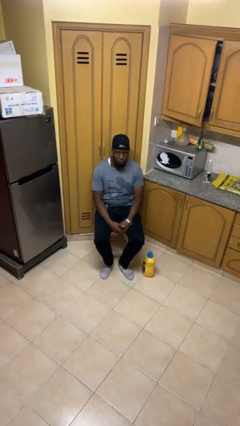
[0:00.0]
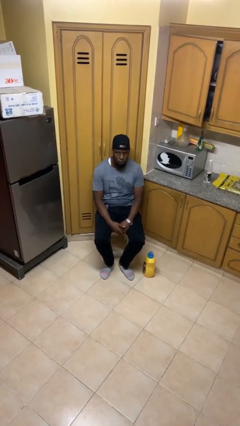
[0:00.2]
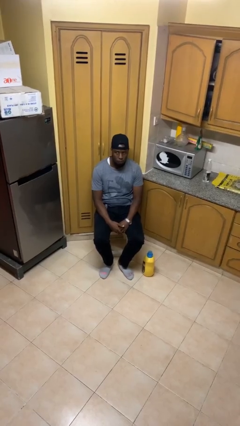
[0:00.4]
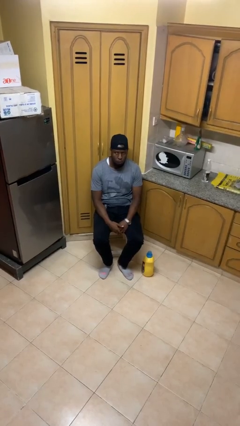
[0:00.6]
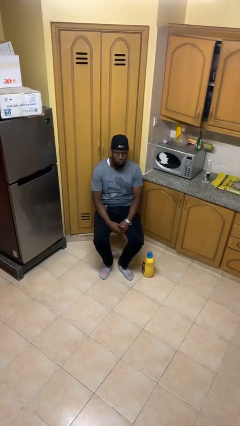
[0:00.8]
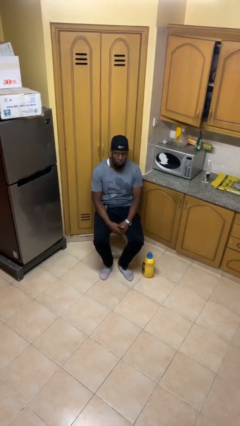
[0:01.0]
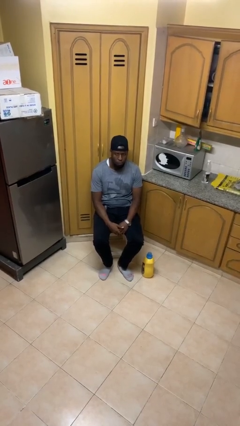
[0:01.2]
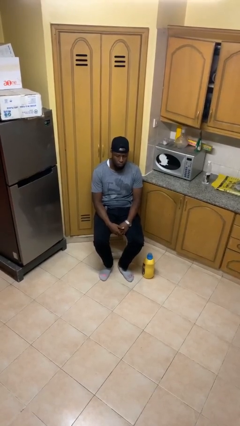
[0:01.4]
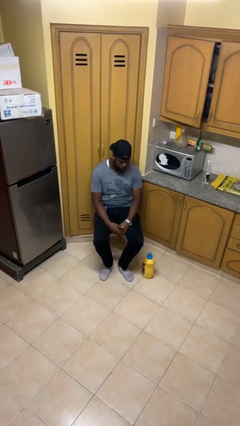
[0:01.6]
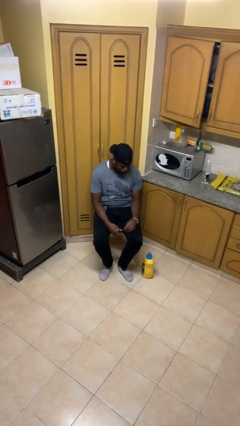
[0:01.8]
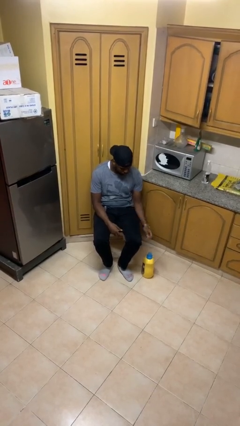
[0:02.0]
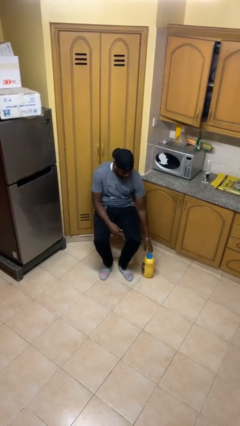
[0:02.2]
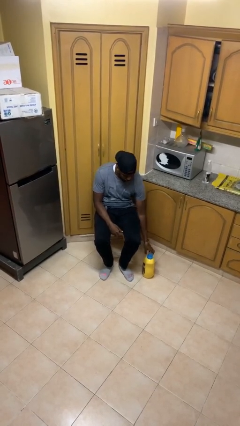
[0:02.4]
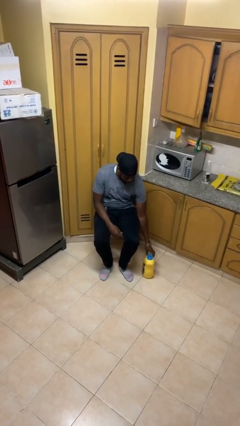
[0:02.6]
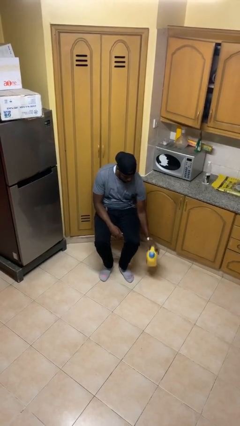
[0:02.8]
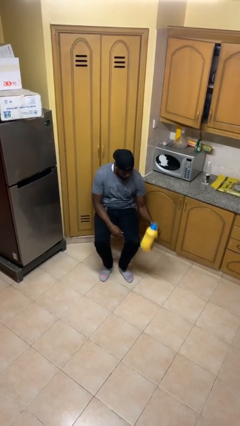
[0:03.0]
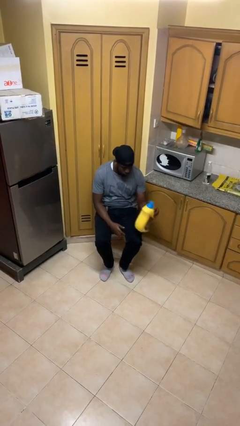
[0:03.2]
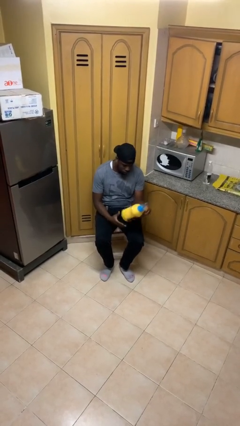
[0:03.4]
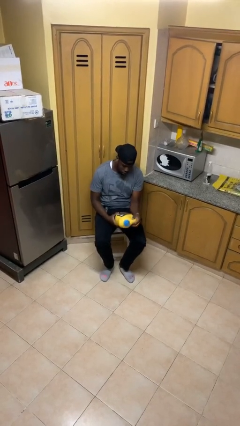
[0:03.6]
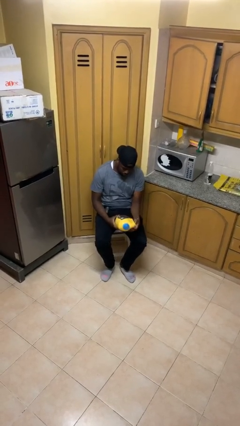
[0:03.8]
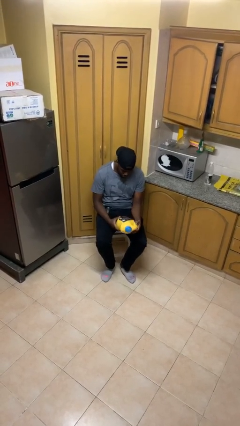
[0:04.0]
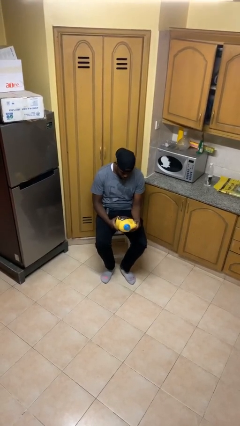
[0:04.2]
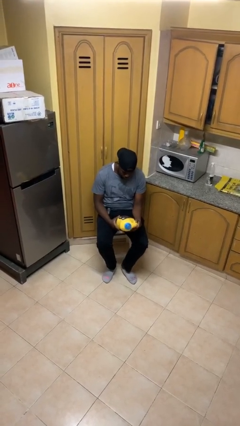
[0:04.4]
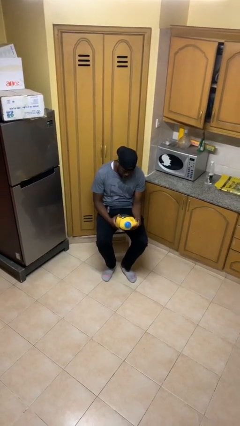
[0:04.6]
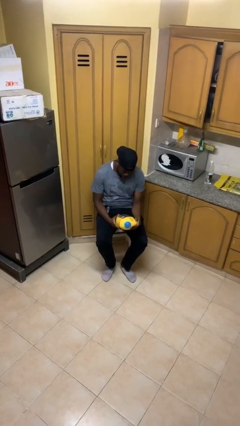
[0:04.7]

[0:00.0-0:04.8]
person picks up object from floor

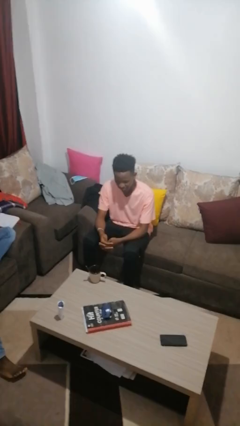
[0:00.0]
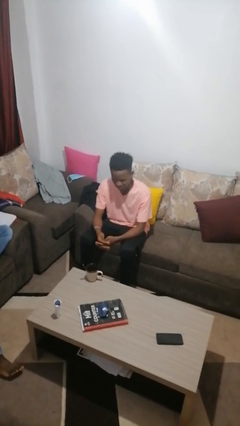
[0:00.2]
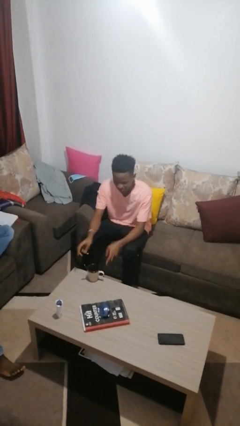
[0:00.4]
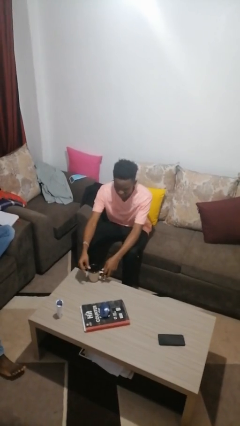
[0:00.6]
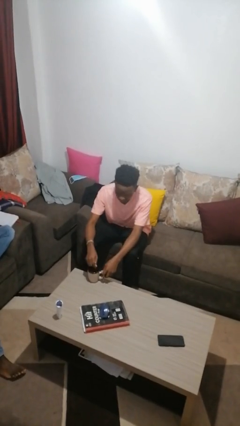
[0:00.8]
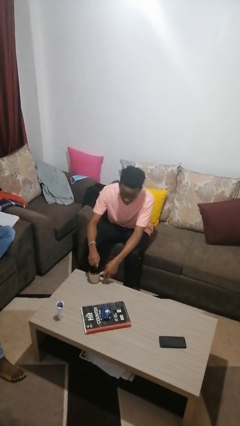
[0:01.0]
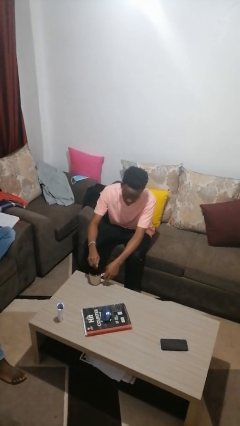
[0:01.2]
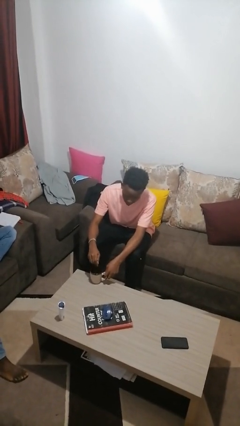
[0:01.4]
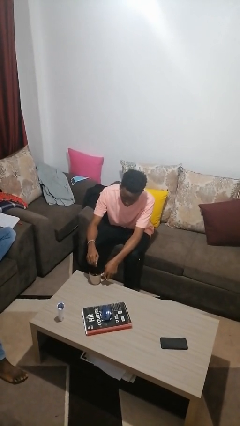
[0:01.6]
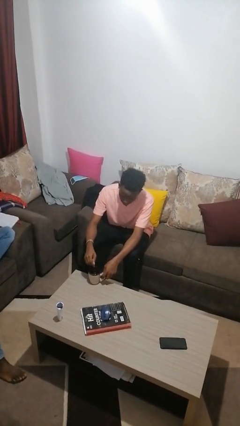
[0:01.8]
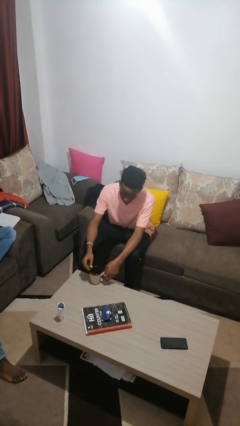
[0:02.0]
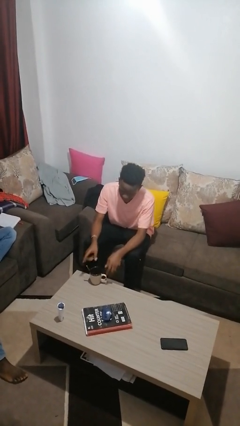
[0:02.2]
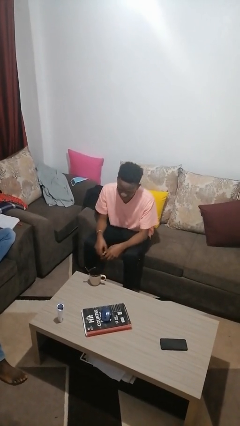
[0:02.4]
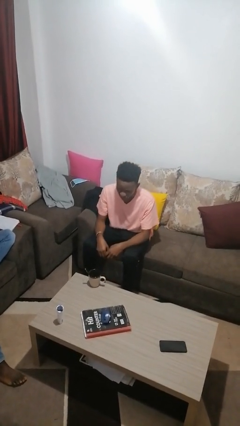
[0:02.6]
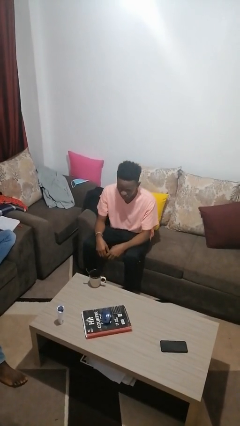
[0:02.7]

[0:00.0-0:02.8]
person stirs mug

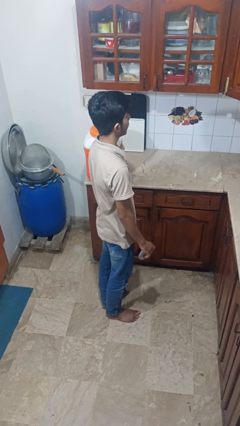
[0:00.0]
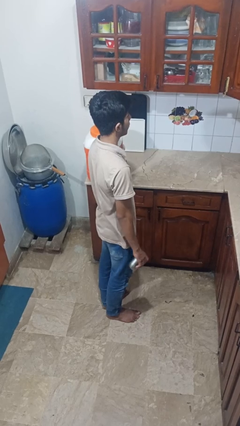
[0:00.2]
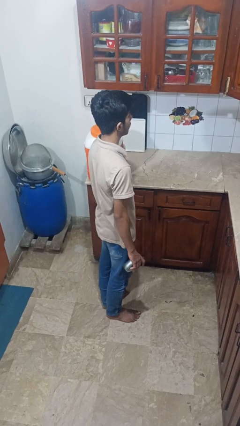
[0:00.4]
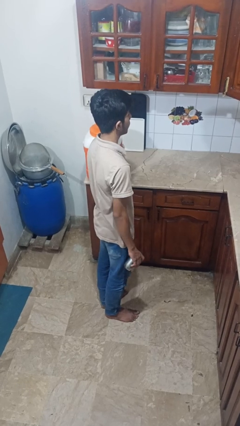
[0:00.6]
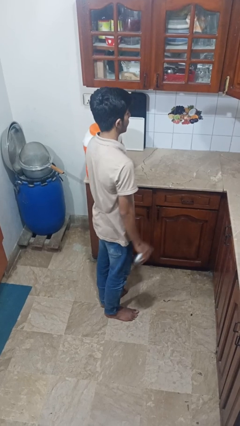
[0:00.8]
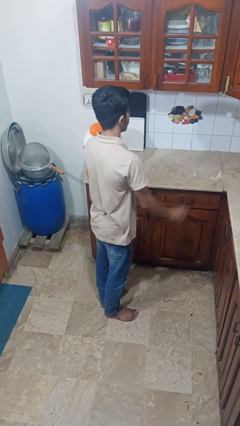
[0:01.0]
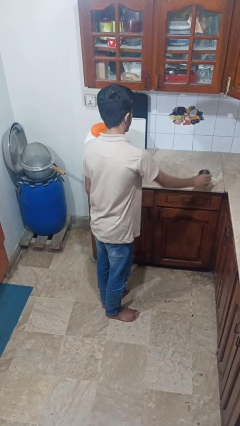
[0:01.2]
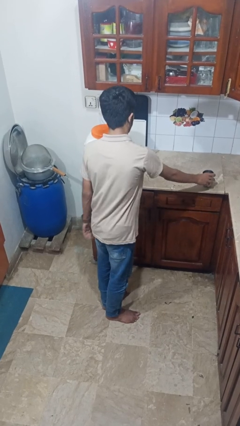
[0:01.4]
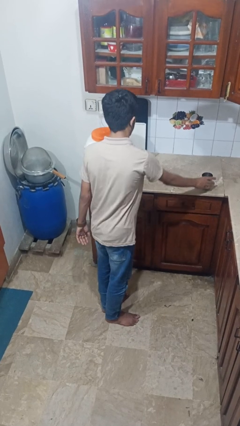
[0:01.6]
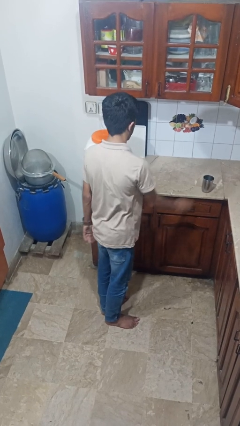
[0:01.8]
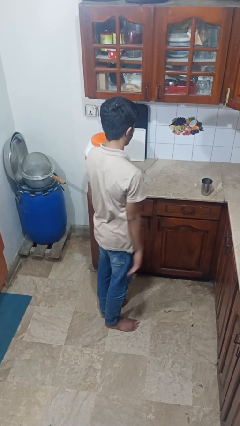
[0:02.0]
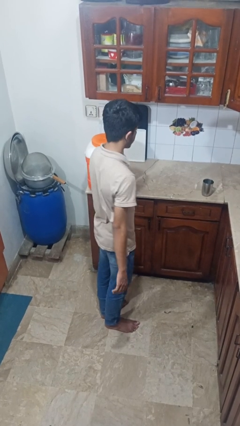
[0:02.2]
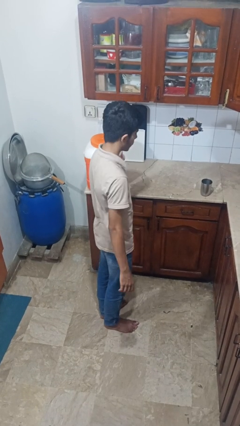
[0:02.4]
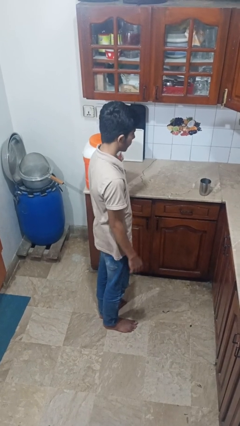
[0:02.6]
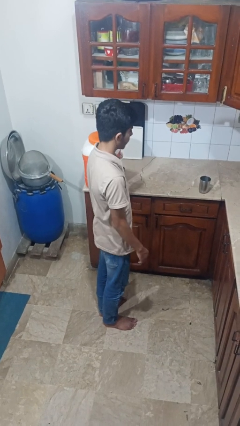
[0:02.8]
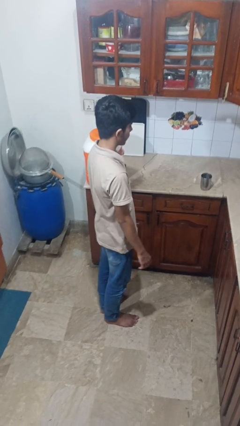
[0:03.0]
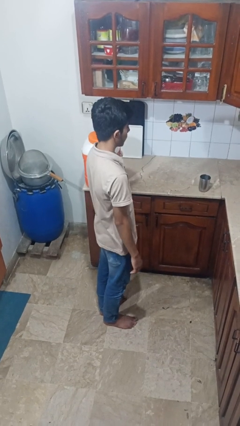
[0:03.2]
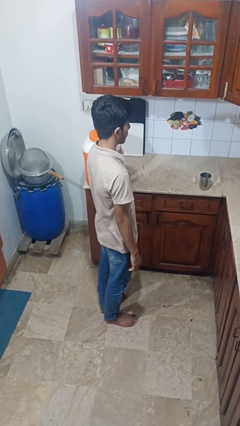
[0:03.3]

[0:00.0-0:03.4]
person puts down object on countertop

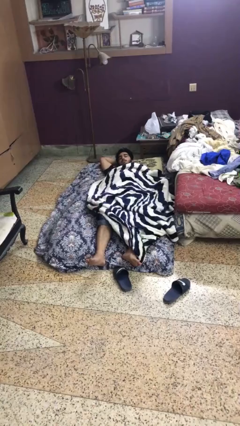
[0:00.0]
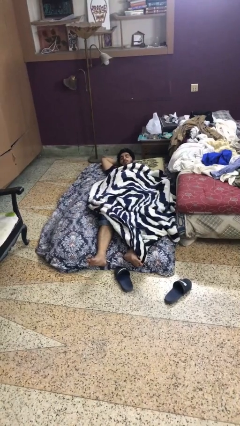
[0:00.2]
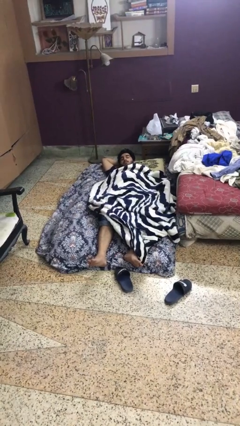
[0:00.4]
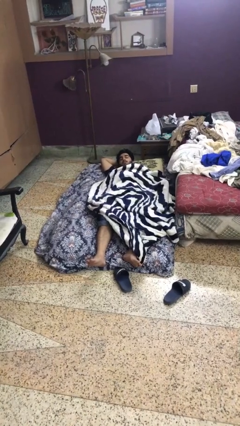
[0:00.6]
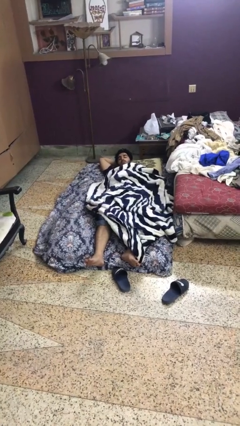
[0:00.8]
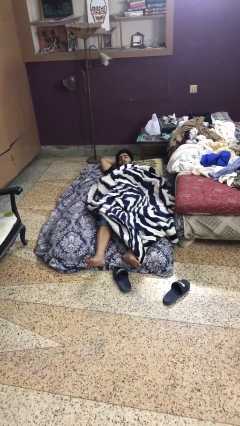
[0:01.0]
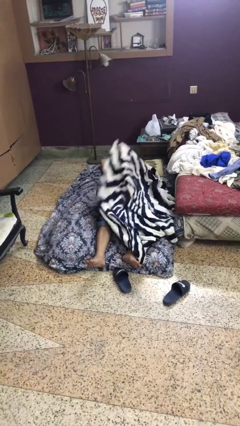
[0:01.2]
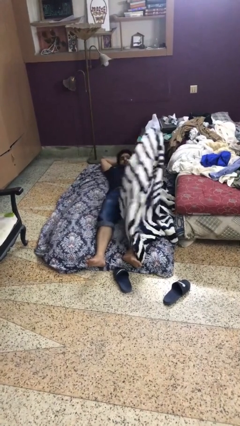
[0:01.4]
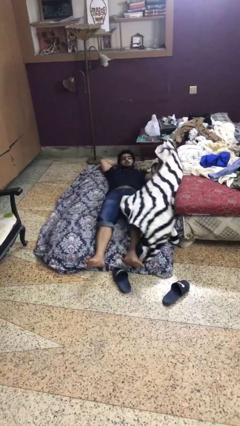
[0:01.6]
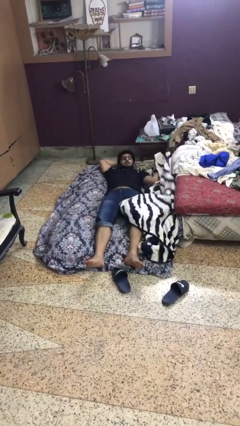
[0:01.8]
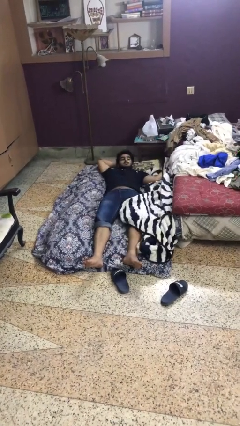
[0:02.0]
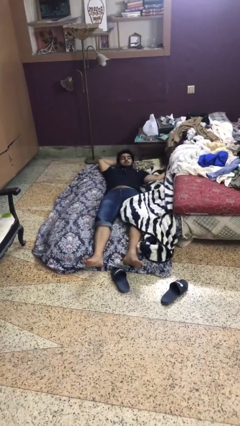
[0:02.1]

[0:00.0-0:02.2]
person uncovers with blanket

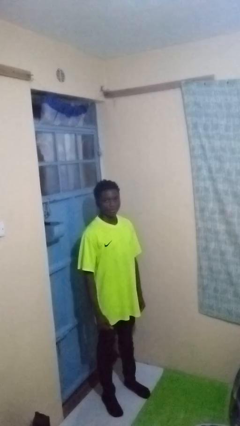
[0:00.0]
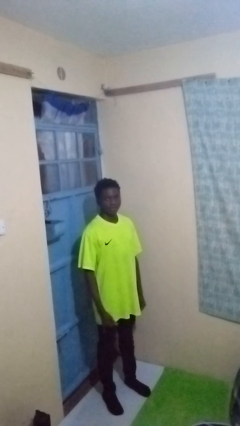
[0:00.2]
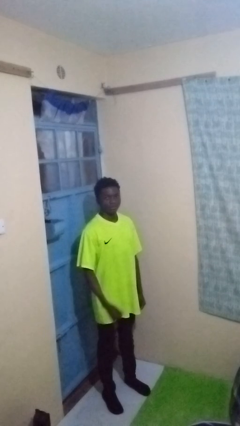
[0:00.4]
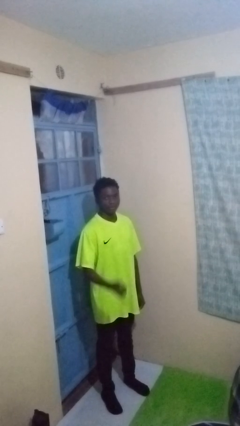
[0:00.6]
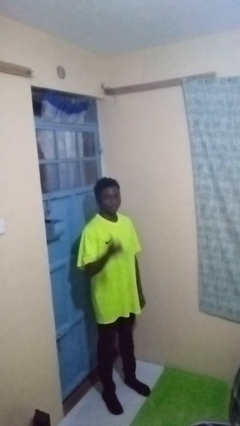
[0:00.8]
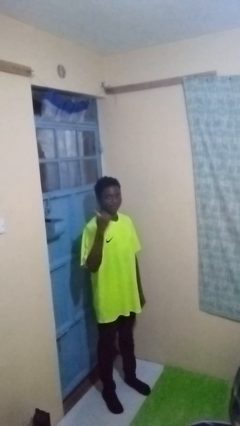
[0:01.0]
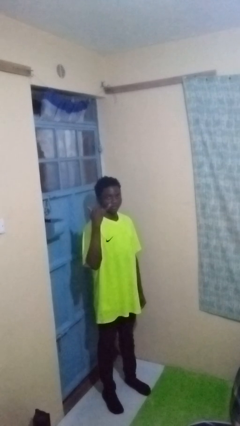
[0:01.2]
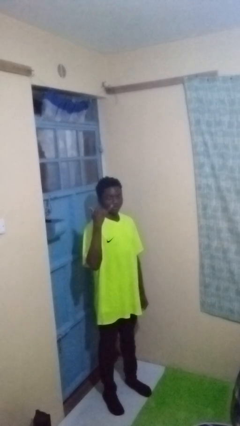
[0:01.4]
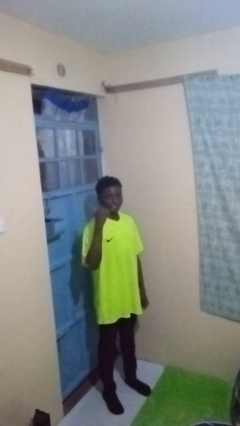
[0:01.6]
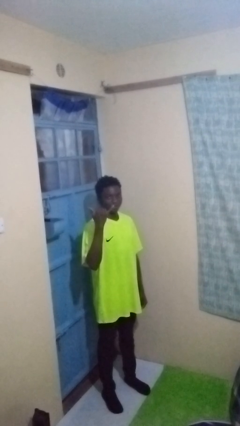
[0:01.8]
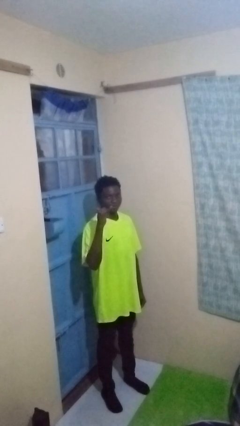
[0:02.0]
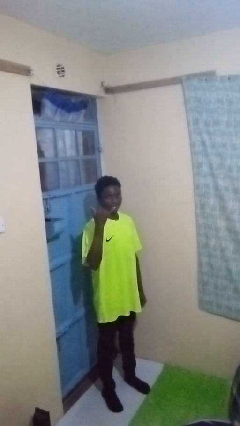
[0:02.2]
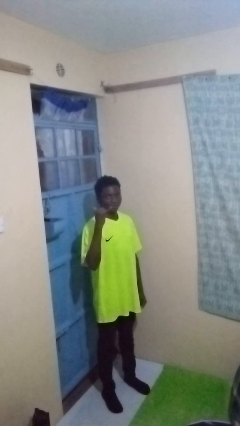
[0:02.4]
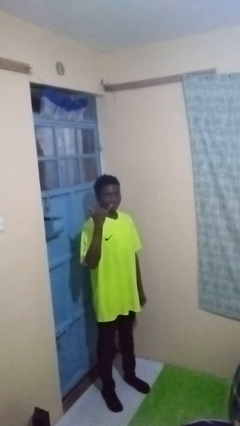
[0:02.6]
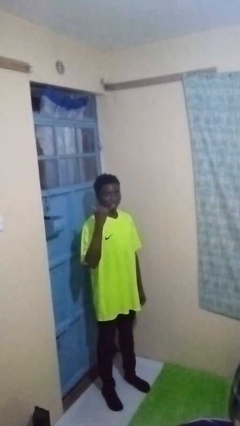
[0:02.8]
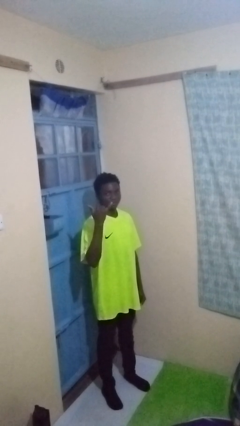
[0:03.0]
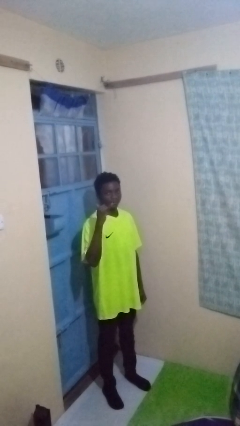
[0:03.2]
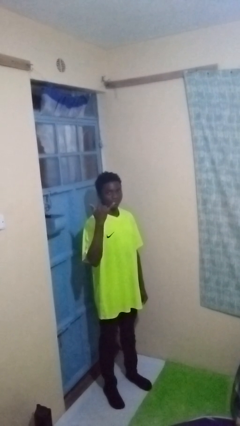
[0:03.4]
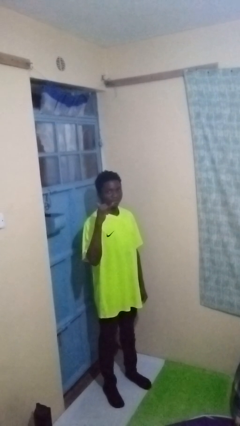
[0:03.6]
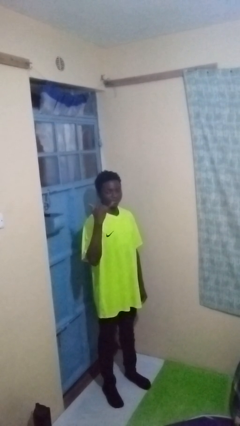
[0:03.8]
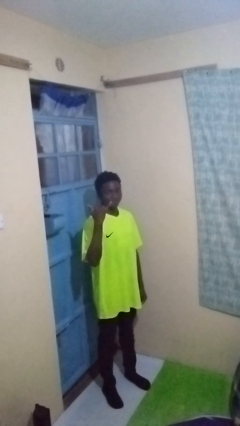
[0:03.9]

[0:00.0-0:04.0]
person gestures hang loose
